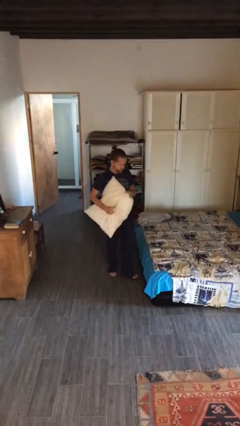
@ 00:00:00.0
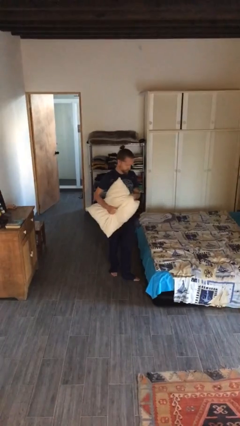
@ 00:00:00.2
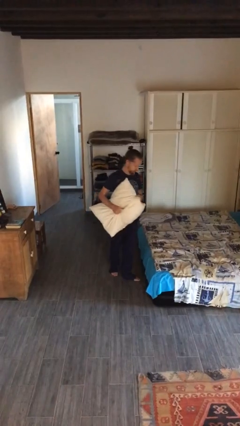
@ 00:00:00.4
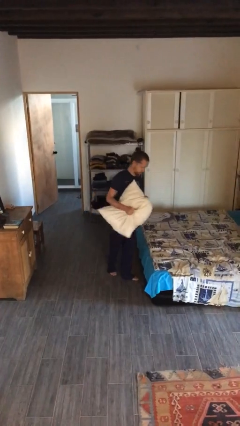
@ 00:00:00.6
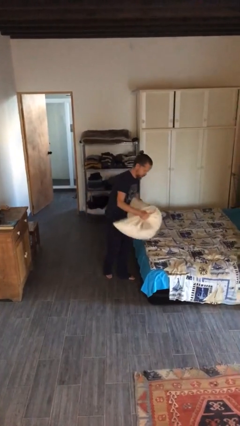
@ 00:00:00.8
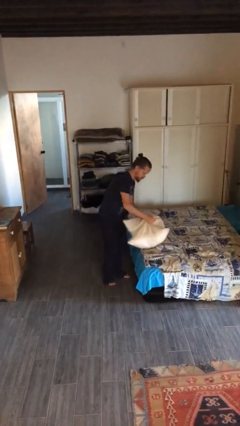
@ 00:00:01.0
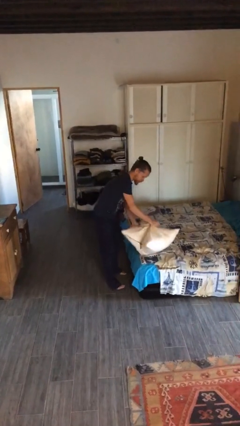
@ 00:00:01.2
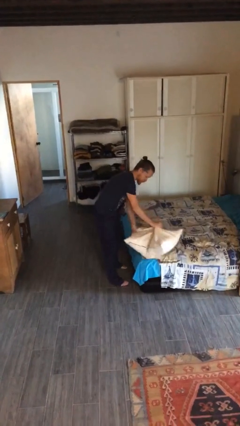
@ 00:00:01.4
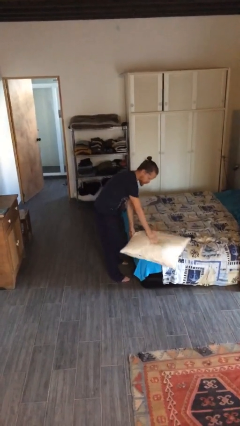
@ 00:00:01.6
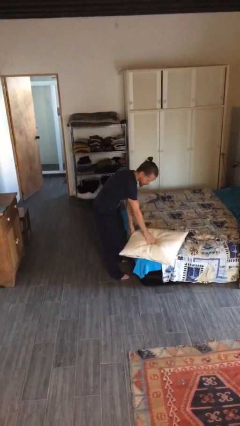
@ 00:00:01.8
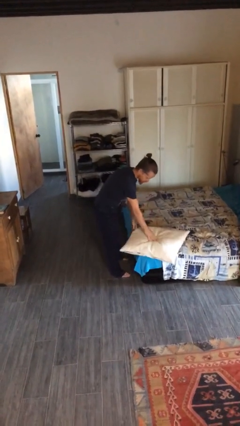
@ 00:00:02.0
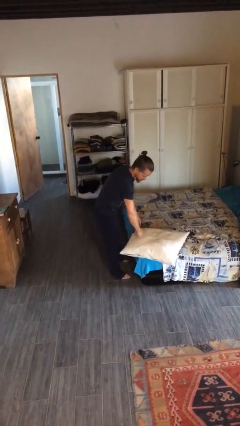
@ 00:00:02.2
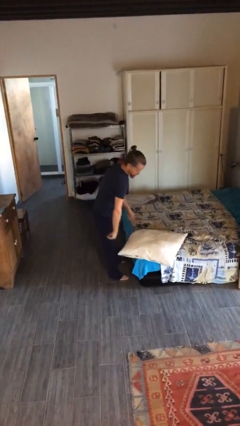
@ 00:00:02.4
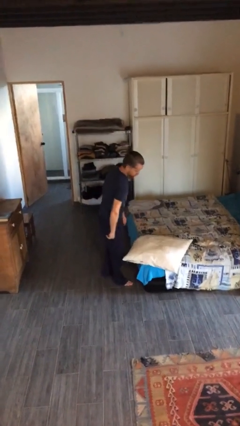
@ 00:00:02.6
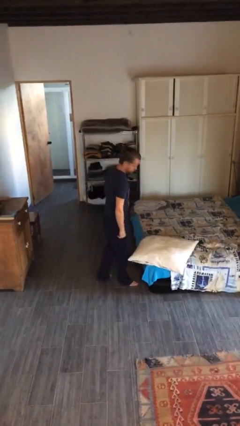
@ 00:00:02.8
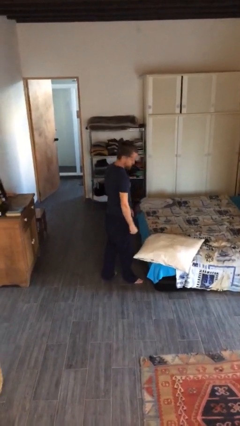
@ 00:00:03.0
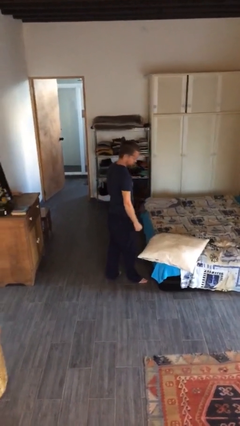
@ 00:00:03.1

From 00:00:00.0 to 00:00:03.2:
person puts down object on bed

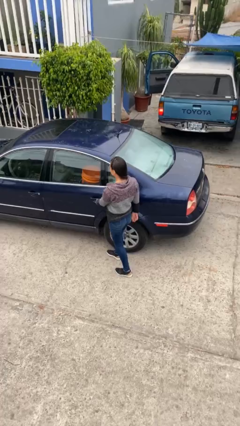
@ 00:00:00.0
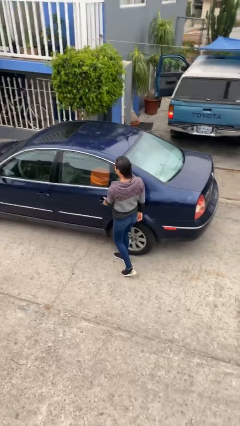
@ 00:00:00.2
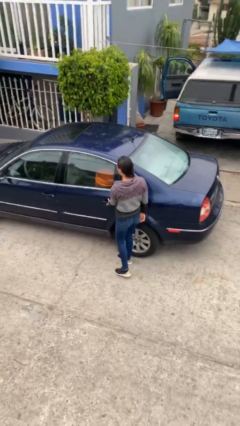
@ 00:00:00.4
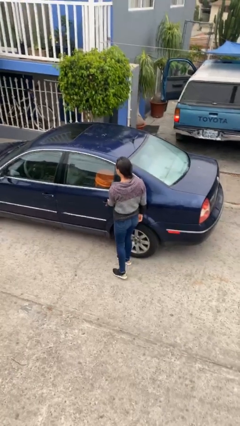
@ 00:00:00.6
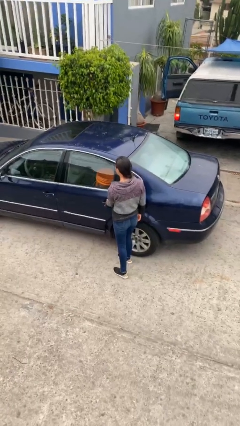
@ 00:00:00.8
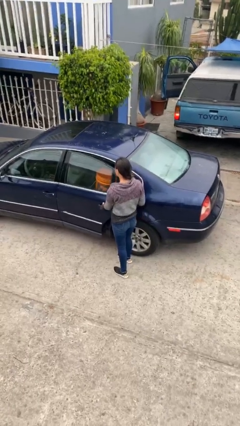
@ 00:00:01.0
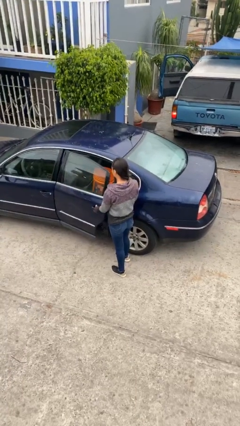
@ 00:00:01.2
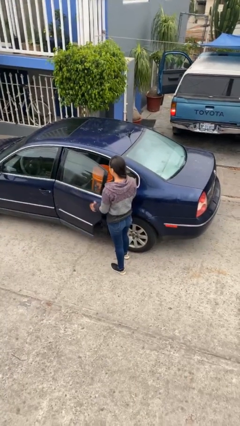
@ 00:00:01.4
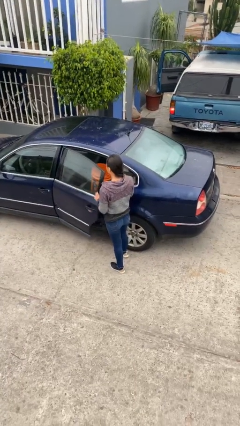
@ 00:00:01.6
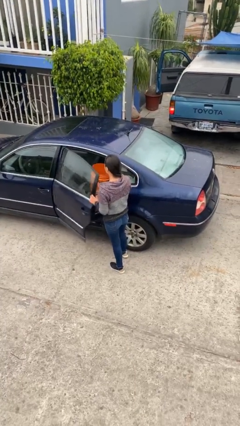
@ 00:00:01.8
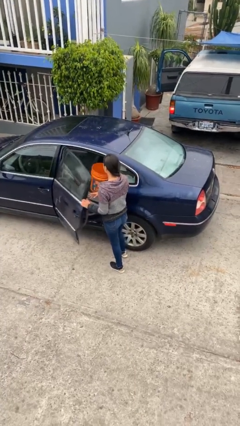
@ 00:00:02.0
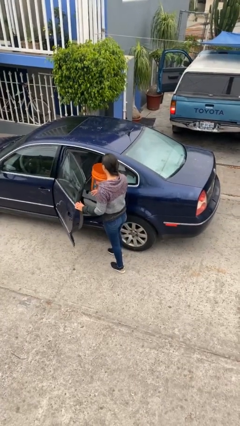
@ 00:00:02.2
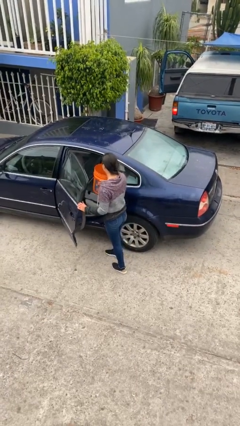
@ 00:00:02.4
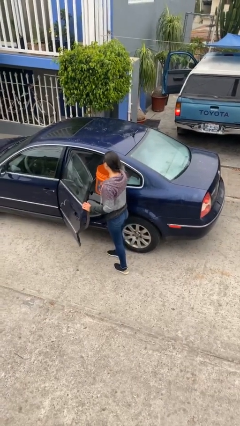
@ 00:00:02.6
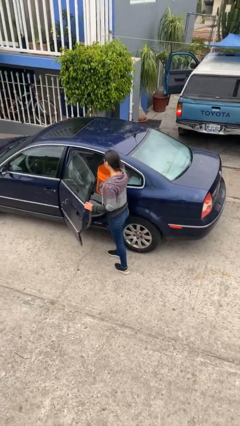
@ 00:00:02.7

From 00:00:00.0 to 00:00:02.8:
person opens car door

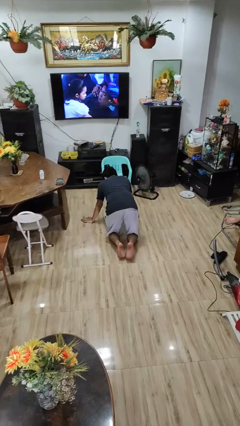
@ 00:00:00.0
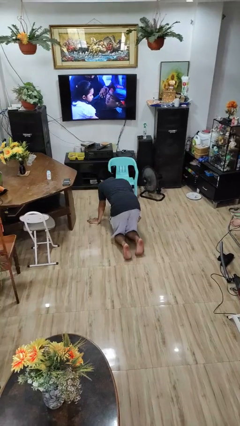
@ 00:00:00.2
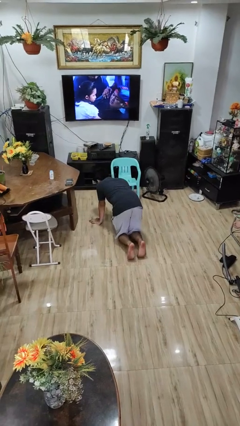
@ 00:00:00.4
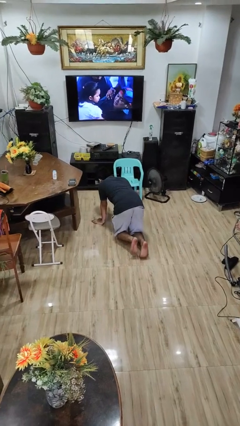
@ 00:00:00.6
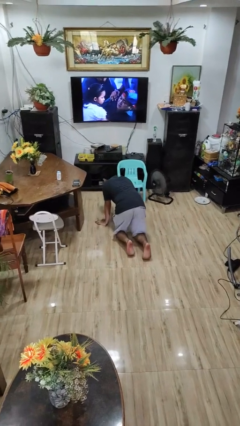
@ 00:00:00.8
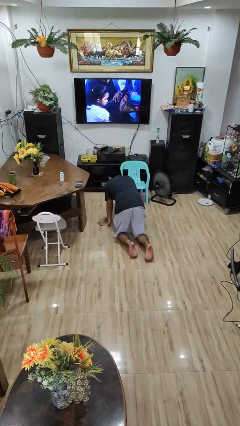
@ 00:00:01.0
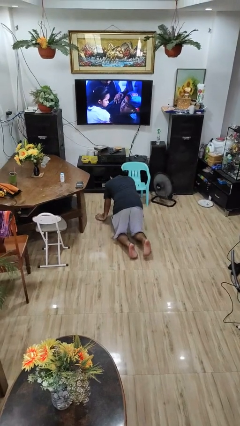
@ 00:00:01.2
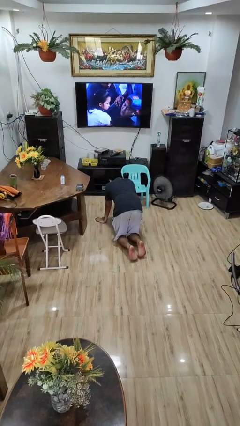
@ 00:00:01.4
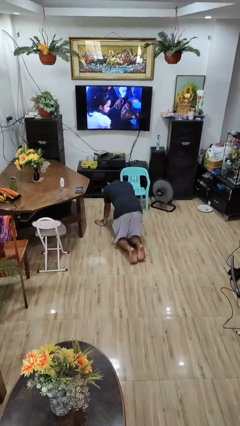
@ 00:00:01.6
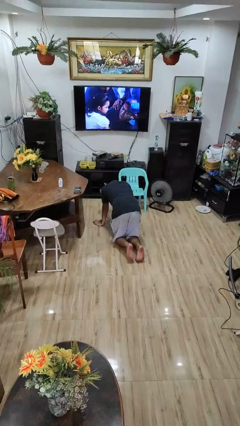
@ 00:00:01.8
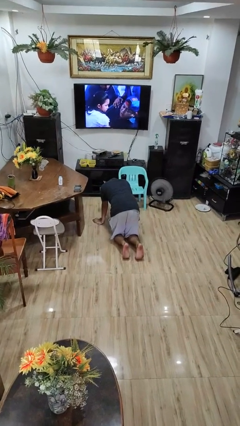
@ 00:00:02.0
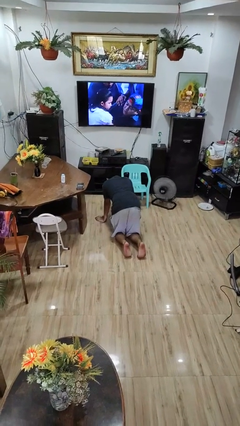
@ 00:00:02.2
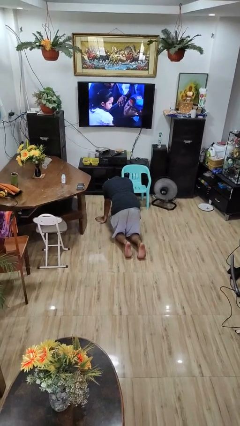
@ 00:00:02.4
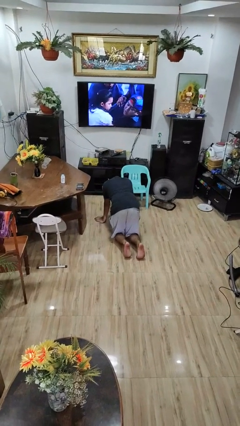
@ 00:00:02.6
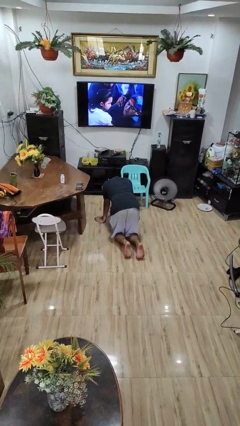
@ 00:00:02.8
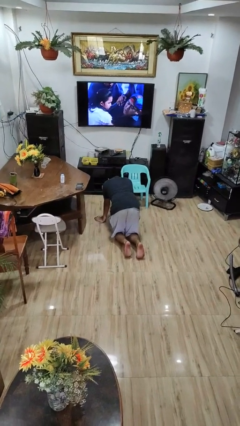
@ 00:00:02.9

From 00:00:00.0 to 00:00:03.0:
person crawls

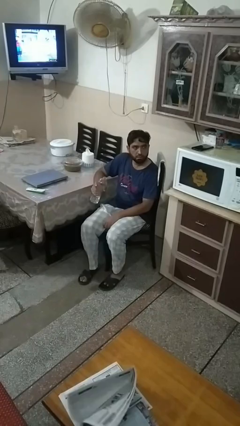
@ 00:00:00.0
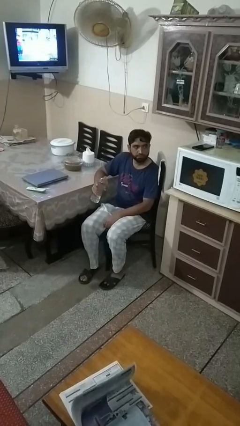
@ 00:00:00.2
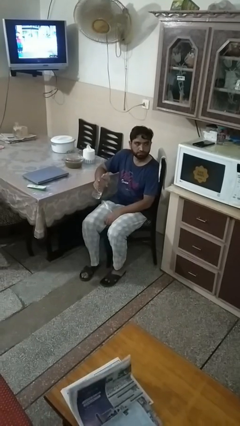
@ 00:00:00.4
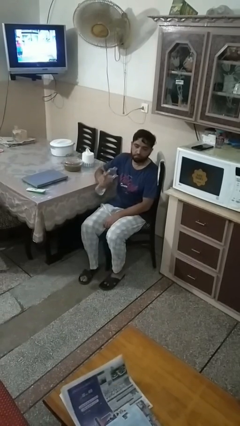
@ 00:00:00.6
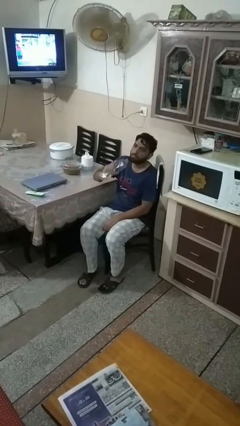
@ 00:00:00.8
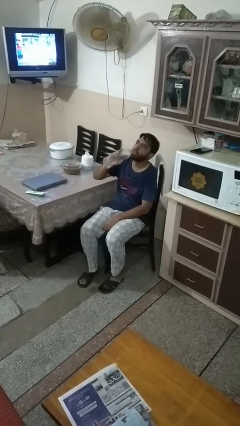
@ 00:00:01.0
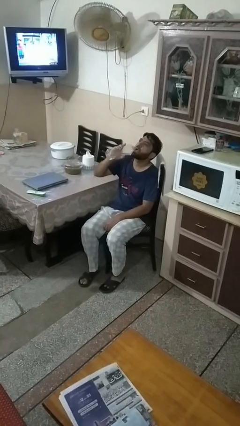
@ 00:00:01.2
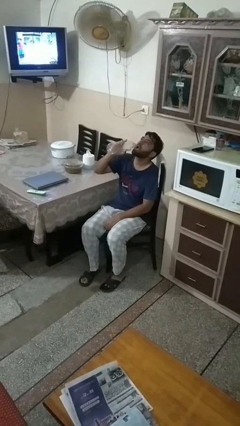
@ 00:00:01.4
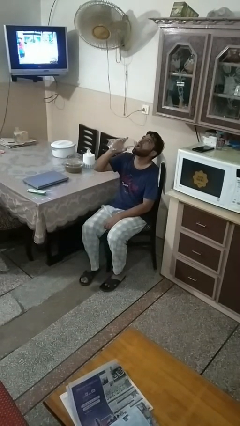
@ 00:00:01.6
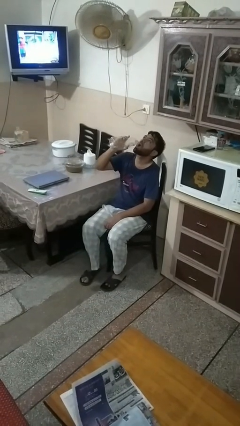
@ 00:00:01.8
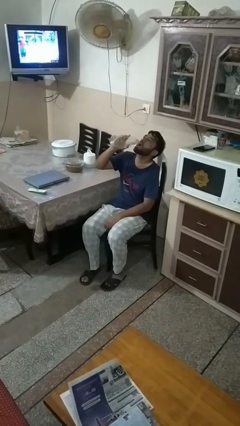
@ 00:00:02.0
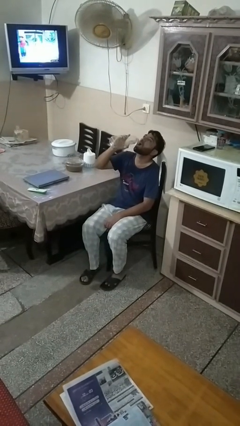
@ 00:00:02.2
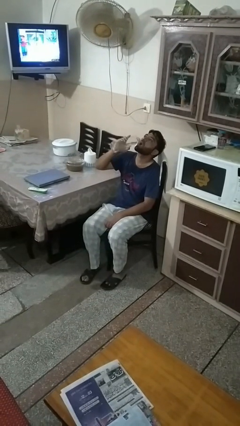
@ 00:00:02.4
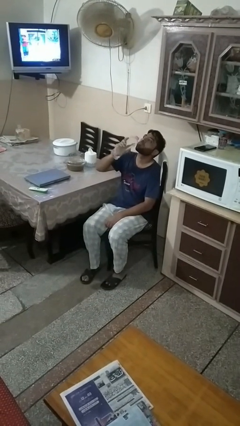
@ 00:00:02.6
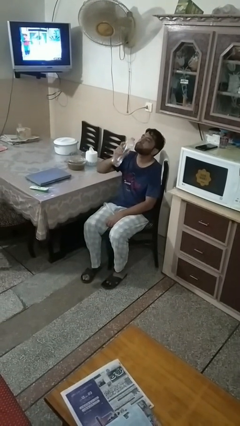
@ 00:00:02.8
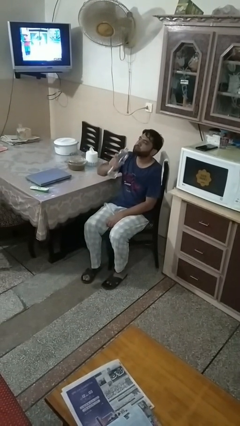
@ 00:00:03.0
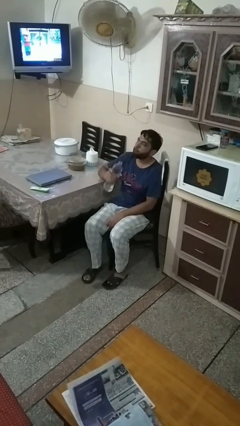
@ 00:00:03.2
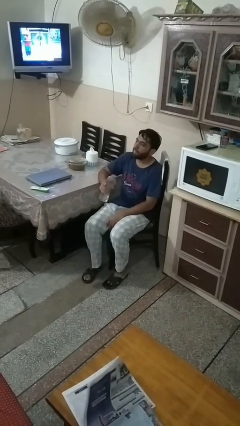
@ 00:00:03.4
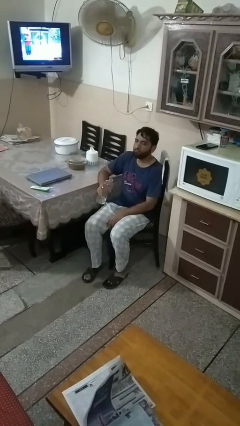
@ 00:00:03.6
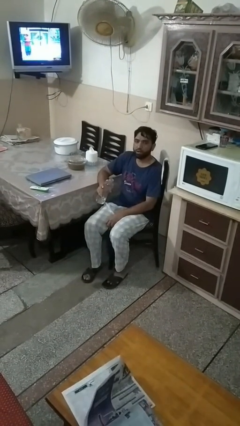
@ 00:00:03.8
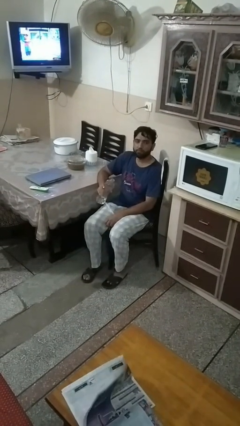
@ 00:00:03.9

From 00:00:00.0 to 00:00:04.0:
person drinks from bottle

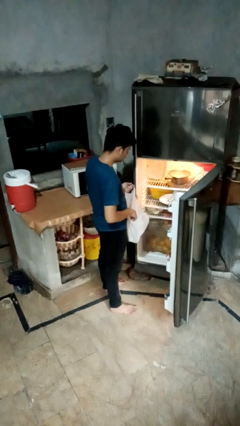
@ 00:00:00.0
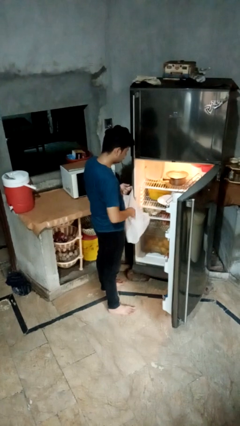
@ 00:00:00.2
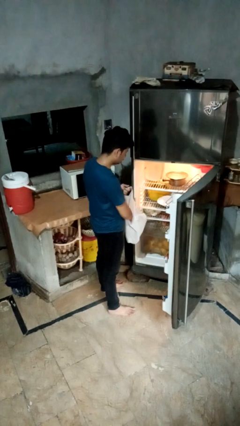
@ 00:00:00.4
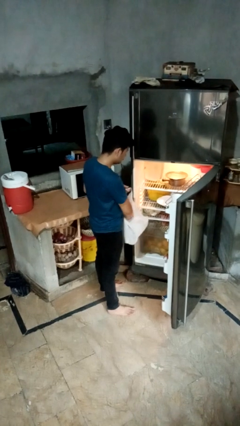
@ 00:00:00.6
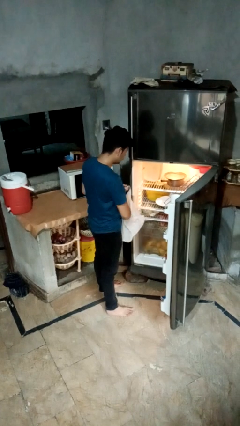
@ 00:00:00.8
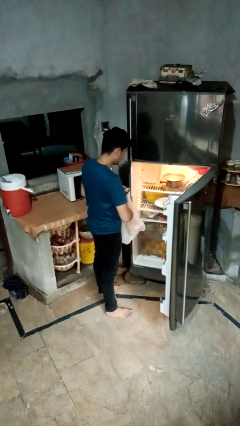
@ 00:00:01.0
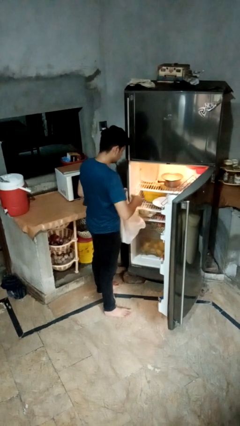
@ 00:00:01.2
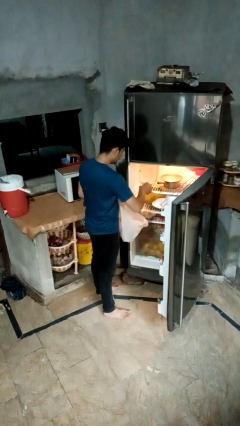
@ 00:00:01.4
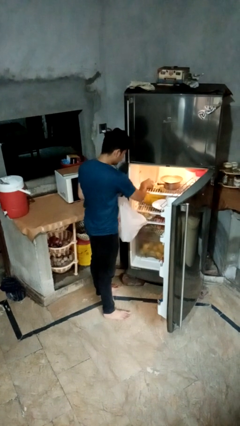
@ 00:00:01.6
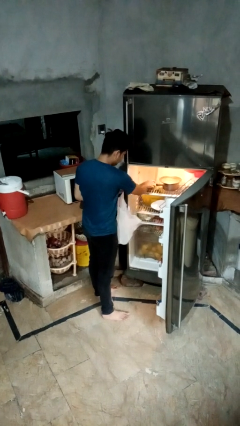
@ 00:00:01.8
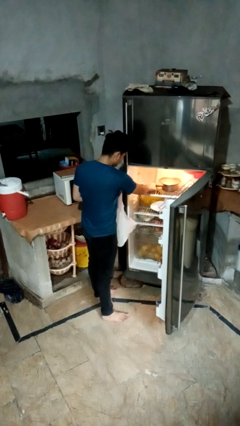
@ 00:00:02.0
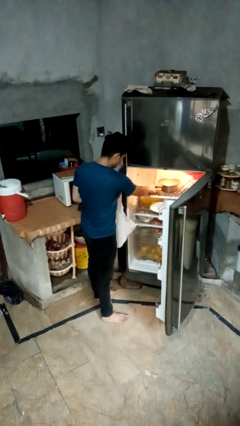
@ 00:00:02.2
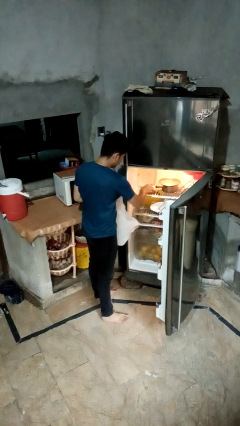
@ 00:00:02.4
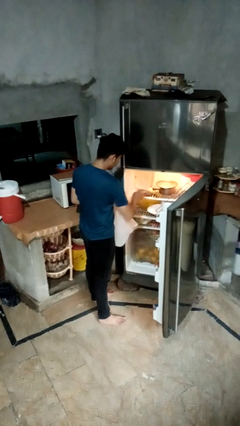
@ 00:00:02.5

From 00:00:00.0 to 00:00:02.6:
person loads groceries into refrigerator

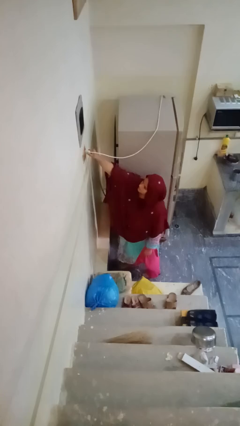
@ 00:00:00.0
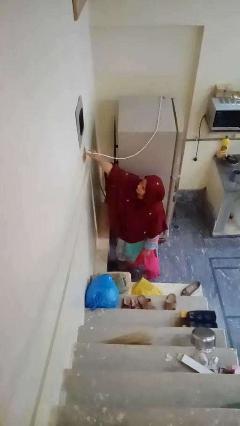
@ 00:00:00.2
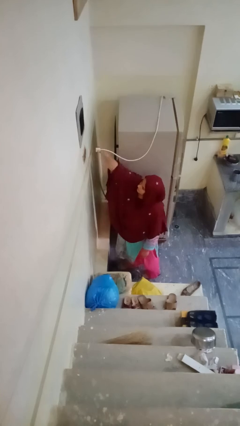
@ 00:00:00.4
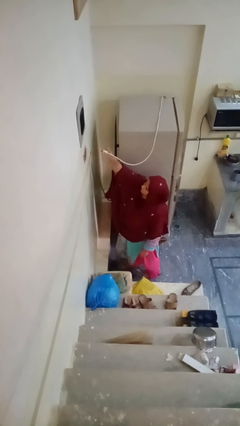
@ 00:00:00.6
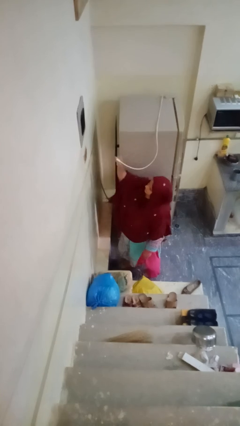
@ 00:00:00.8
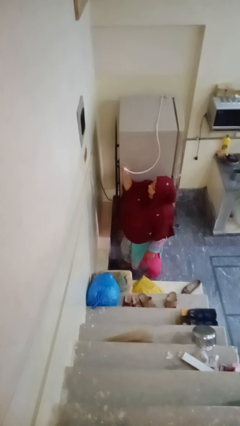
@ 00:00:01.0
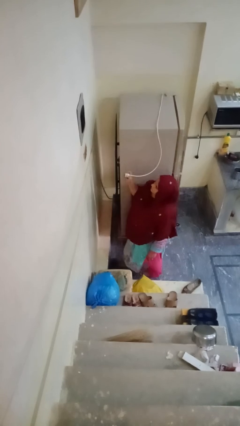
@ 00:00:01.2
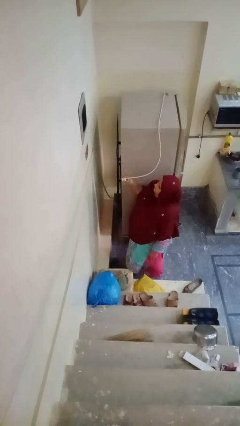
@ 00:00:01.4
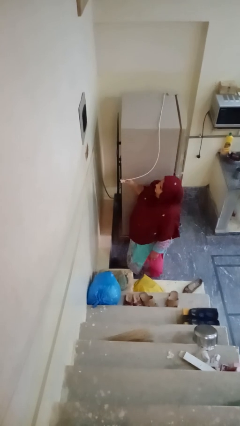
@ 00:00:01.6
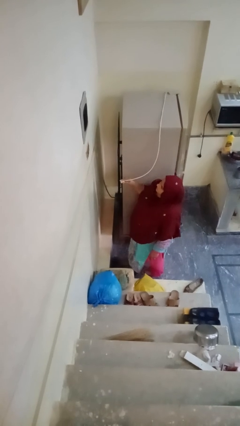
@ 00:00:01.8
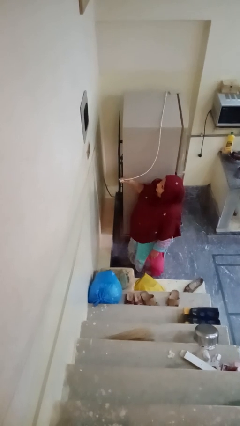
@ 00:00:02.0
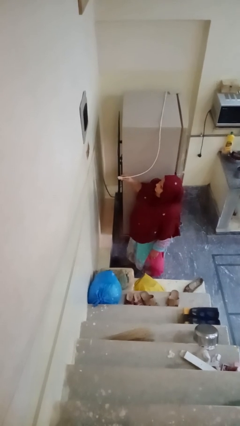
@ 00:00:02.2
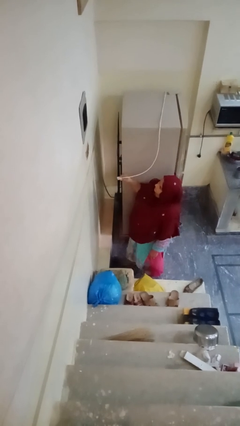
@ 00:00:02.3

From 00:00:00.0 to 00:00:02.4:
person unplugs from electrical socket
